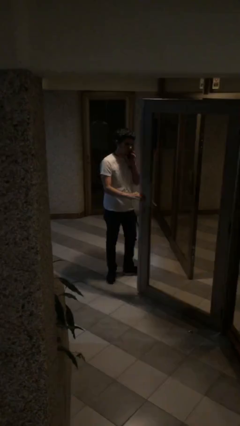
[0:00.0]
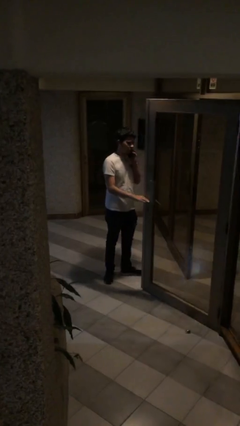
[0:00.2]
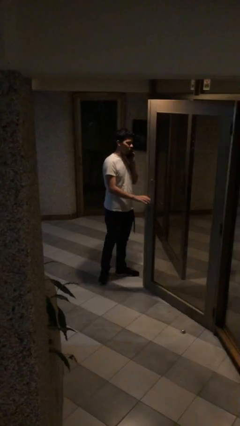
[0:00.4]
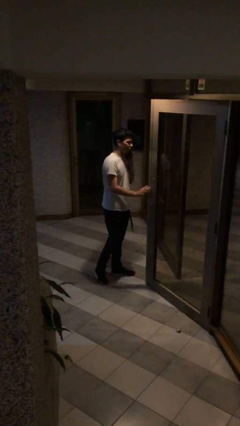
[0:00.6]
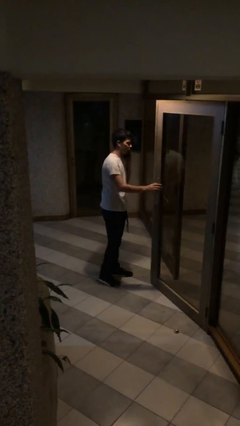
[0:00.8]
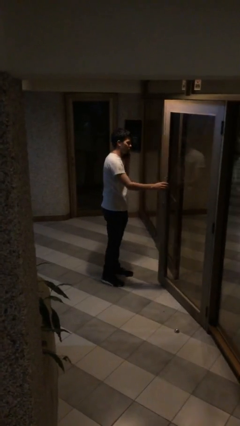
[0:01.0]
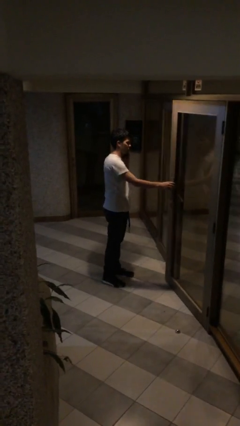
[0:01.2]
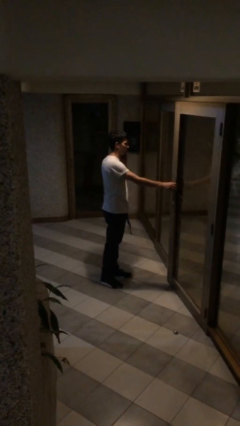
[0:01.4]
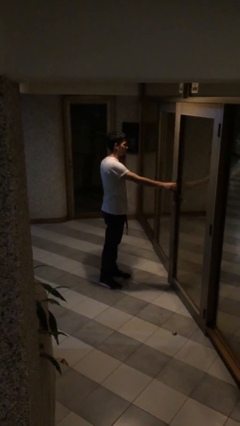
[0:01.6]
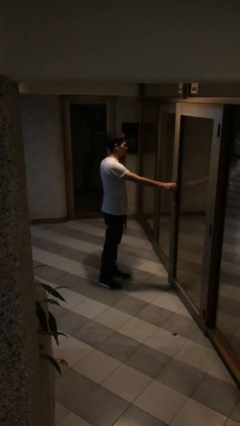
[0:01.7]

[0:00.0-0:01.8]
person closes facility door

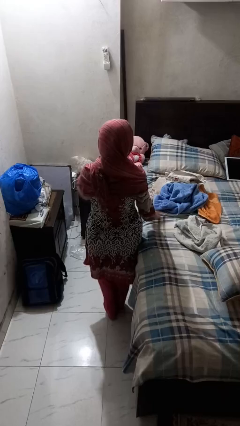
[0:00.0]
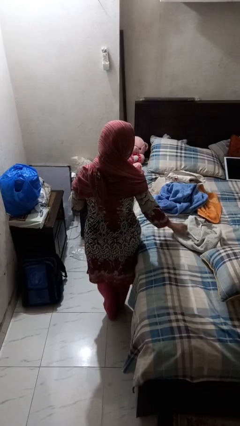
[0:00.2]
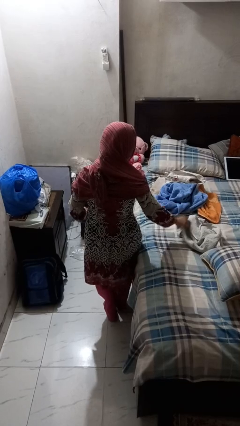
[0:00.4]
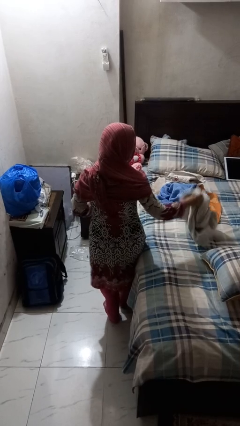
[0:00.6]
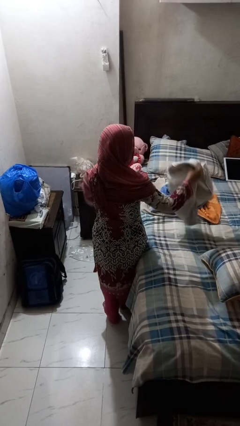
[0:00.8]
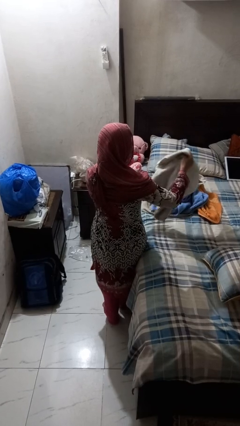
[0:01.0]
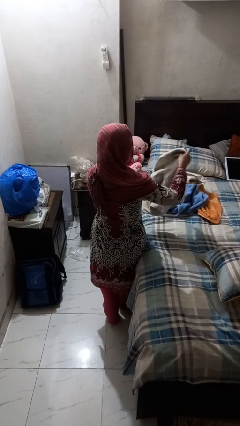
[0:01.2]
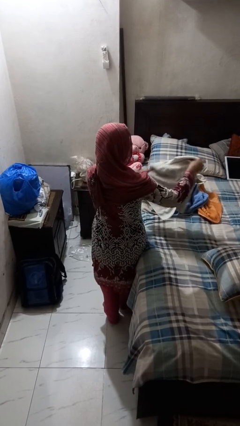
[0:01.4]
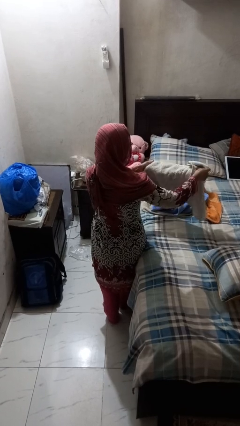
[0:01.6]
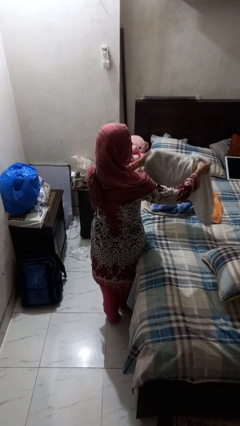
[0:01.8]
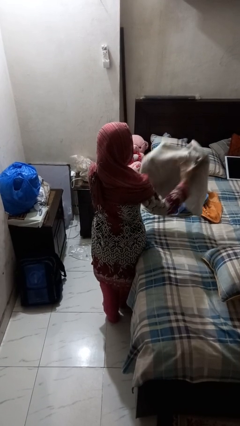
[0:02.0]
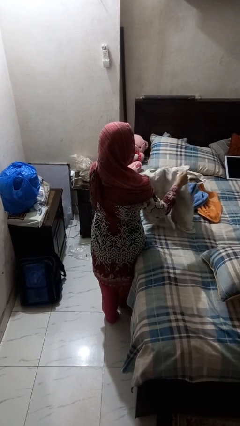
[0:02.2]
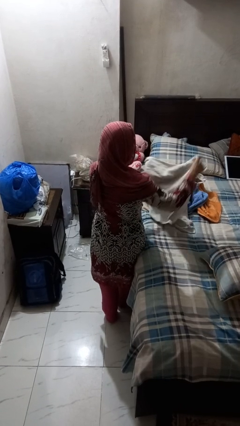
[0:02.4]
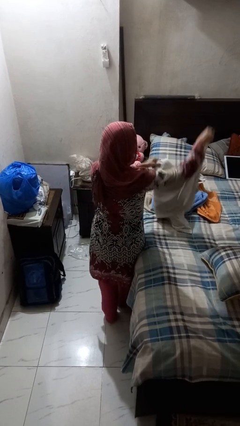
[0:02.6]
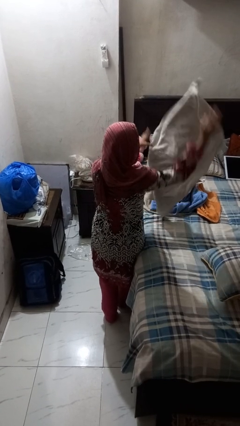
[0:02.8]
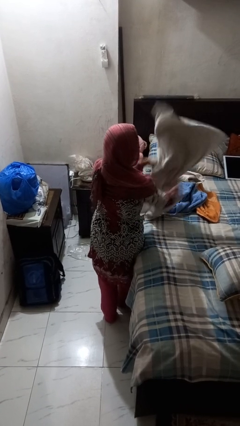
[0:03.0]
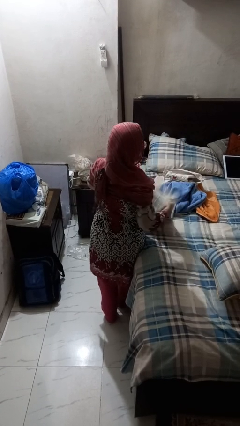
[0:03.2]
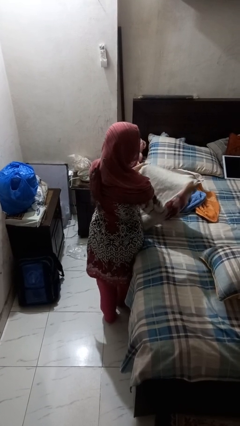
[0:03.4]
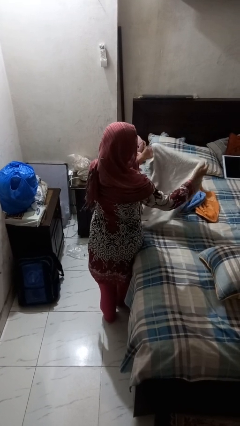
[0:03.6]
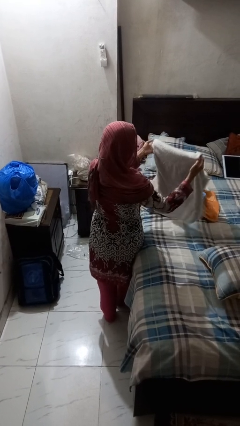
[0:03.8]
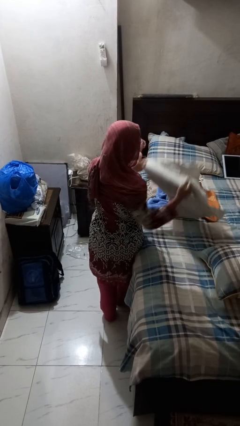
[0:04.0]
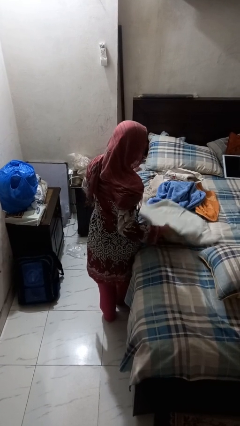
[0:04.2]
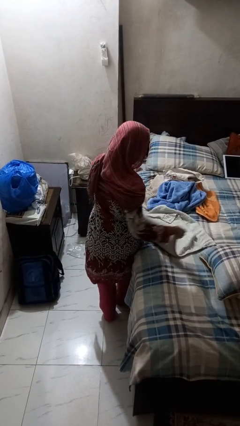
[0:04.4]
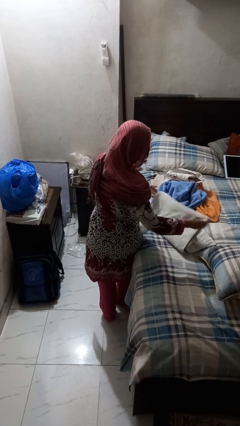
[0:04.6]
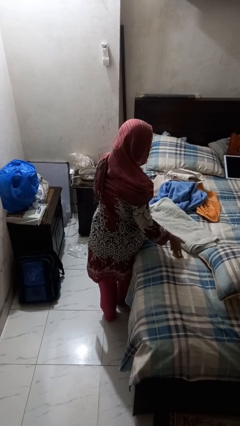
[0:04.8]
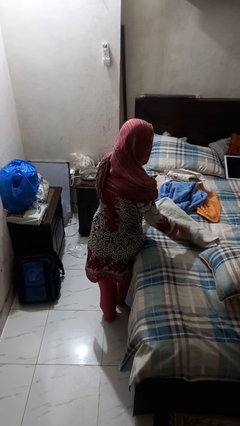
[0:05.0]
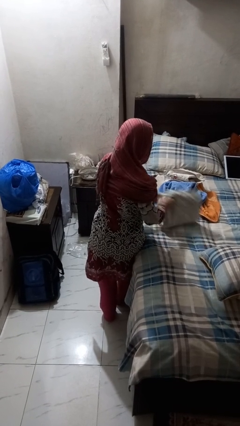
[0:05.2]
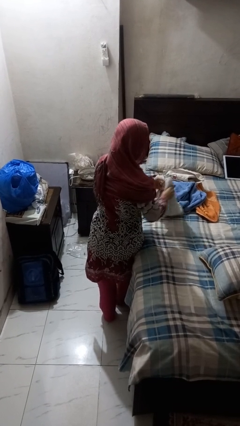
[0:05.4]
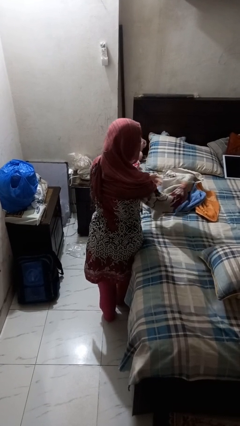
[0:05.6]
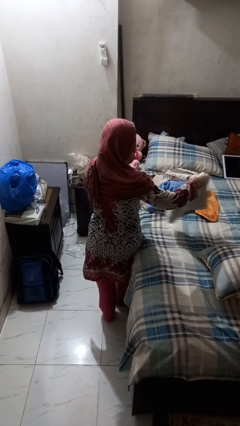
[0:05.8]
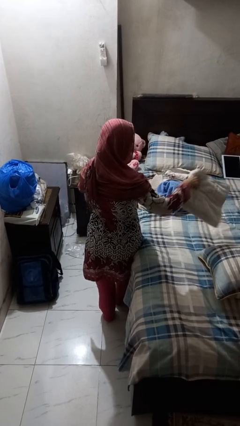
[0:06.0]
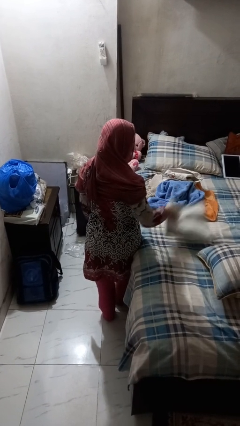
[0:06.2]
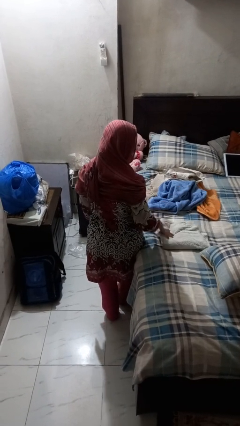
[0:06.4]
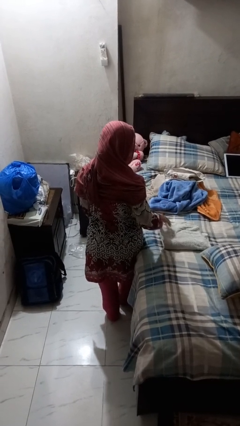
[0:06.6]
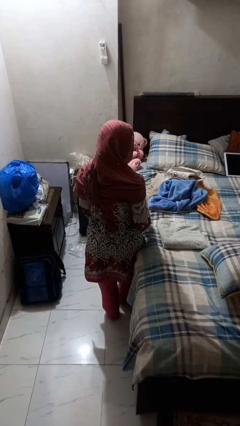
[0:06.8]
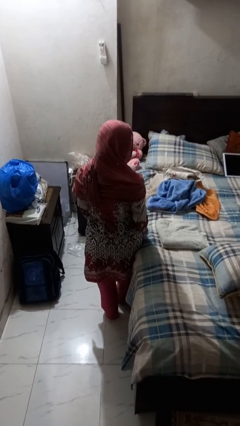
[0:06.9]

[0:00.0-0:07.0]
person folds towel

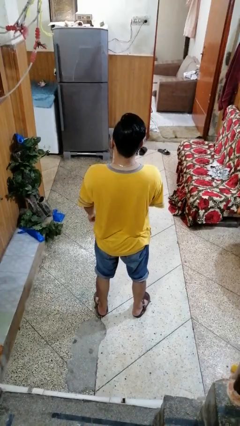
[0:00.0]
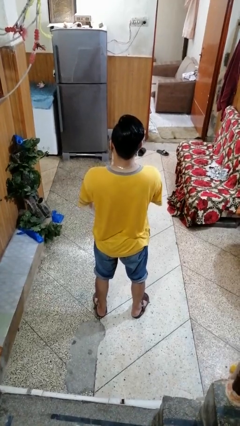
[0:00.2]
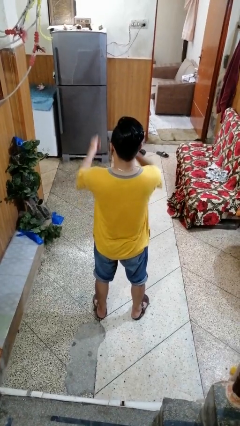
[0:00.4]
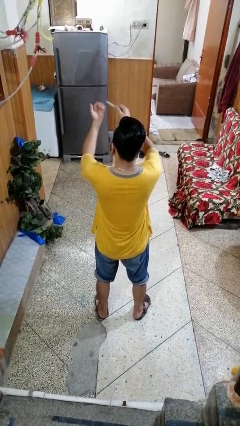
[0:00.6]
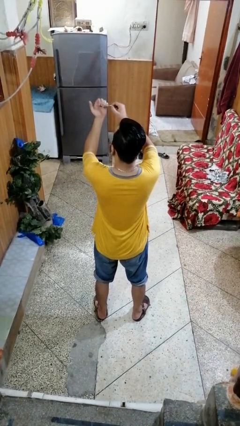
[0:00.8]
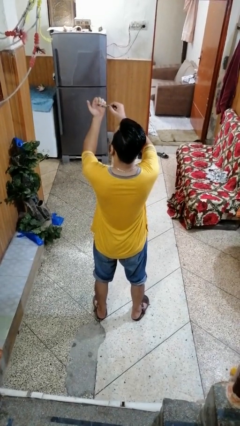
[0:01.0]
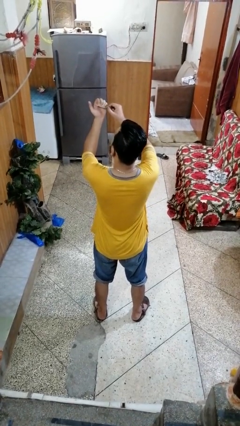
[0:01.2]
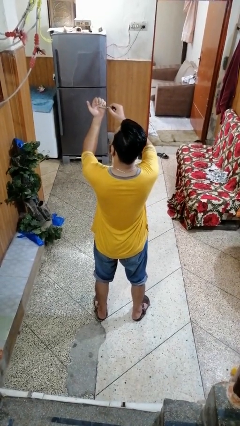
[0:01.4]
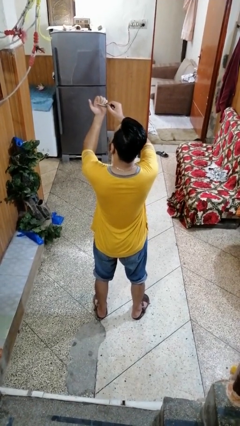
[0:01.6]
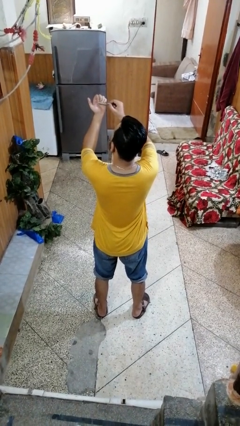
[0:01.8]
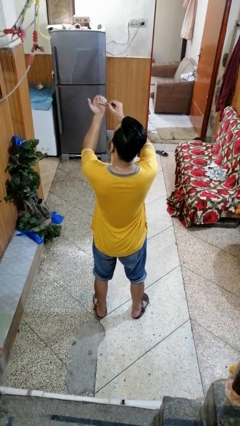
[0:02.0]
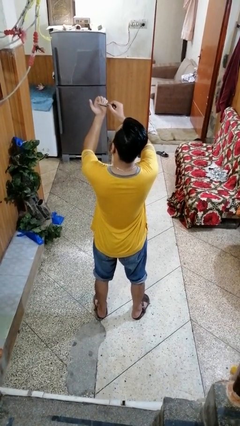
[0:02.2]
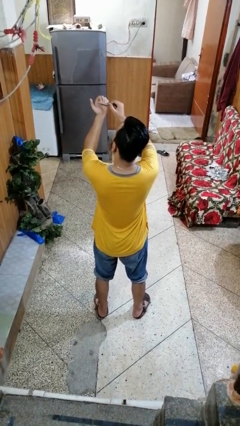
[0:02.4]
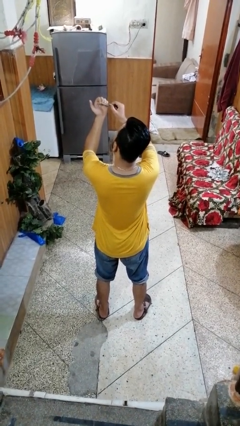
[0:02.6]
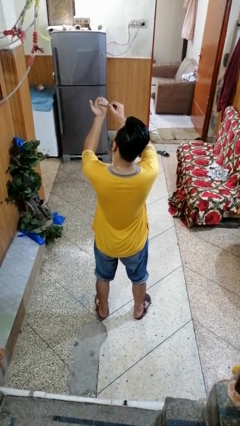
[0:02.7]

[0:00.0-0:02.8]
person files fingernails

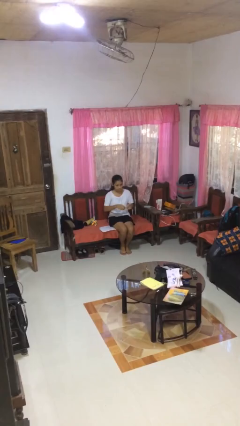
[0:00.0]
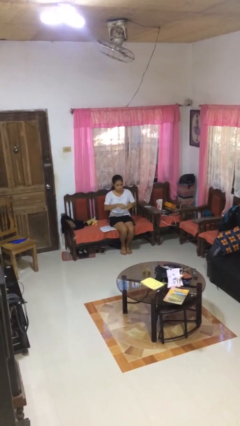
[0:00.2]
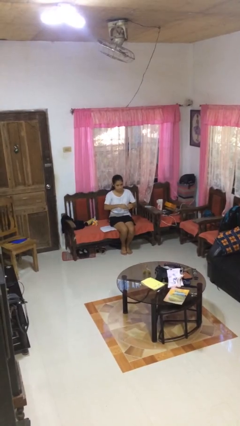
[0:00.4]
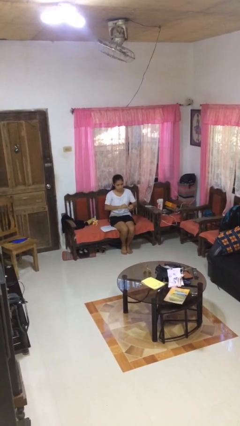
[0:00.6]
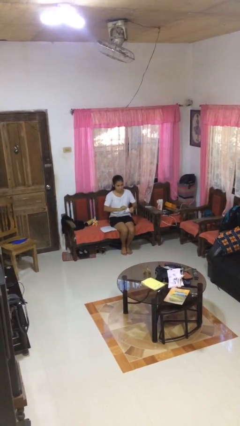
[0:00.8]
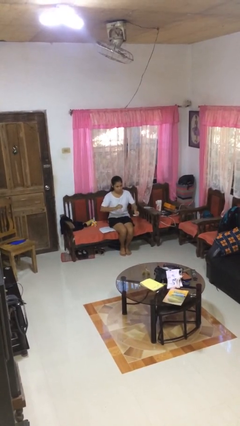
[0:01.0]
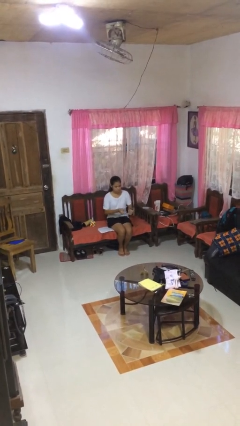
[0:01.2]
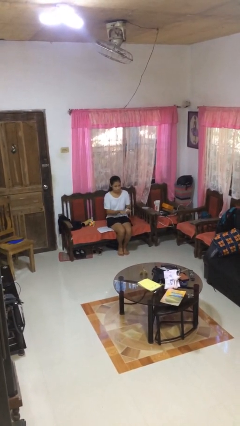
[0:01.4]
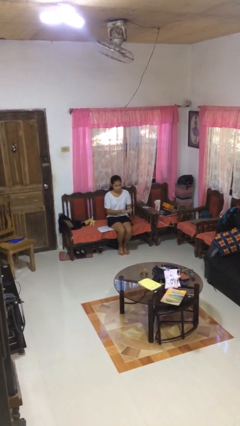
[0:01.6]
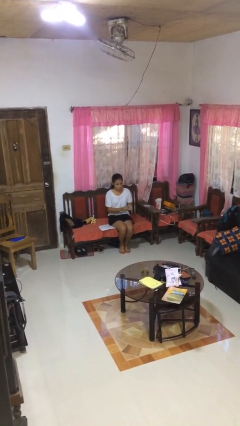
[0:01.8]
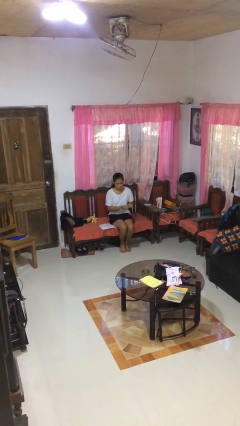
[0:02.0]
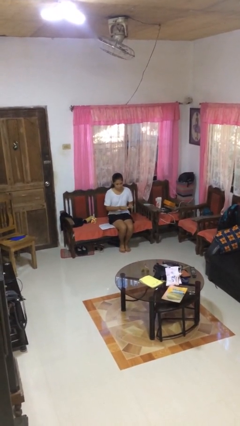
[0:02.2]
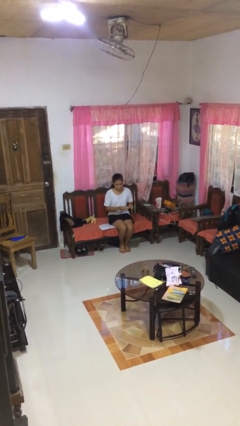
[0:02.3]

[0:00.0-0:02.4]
person tears paper

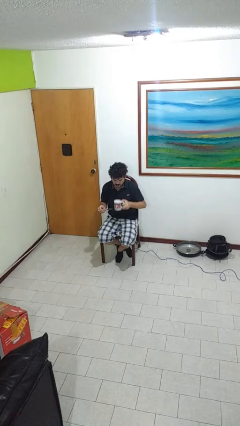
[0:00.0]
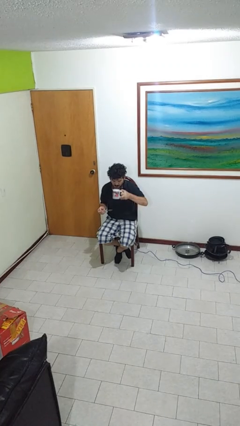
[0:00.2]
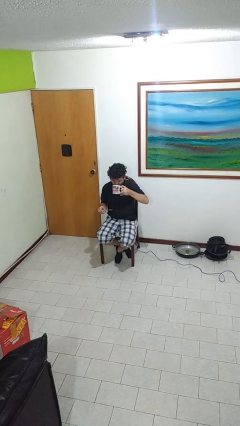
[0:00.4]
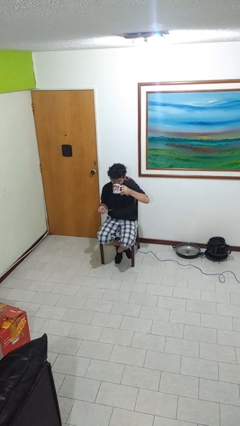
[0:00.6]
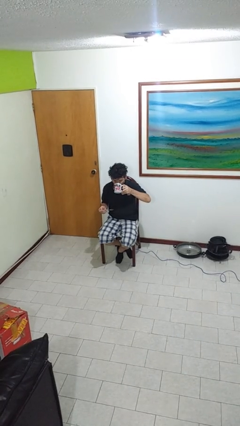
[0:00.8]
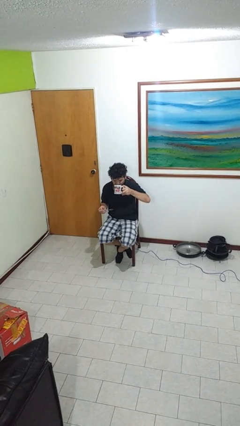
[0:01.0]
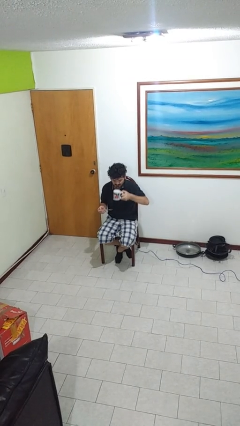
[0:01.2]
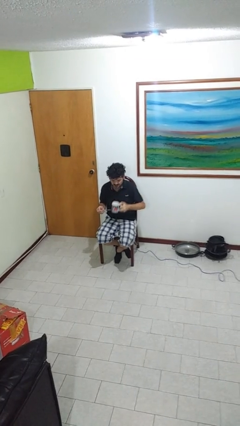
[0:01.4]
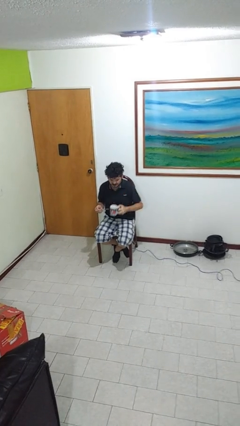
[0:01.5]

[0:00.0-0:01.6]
person drinks from mug

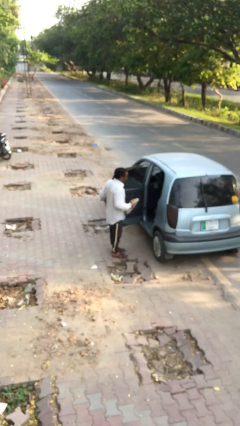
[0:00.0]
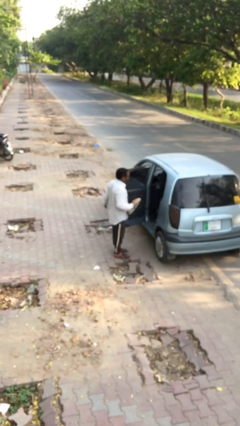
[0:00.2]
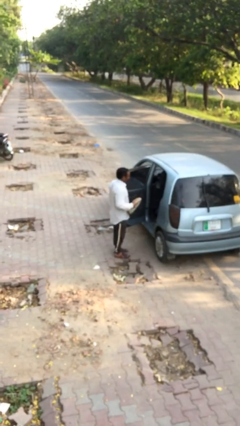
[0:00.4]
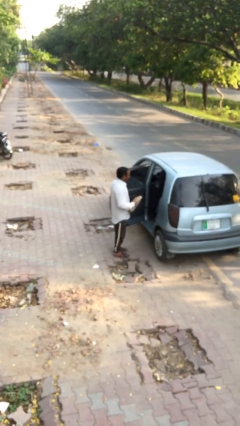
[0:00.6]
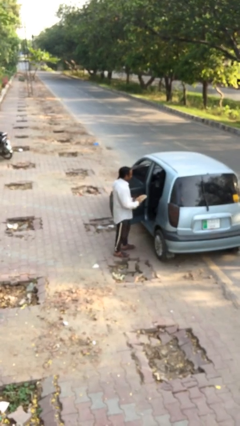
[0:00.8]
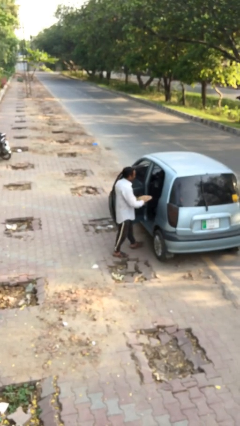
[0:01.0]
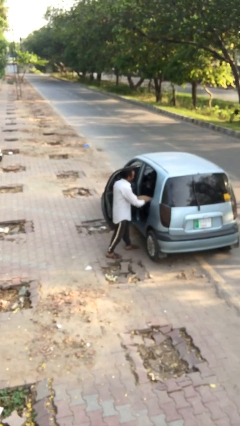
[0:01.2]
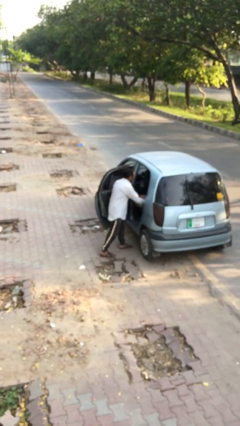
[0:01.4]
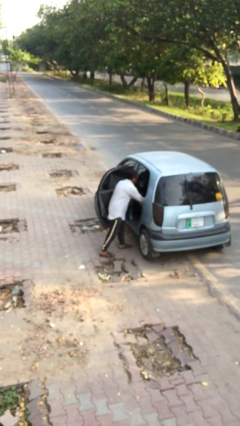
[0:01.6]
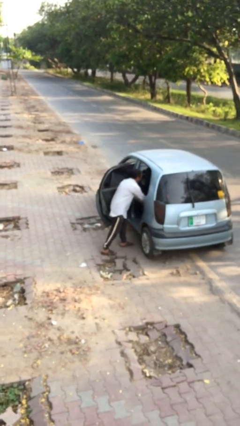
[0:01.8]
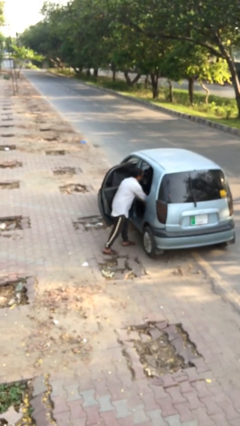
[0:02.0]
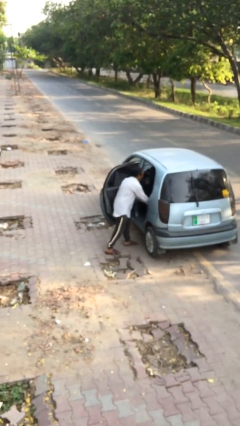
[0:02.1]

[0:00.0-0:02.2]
person loads car
